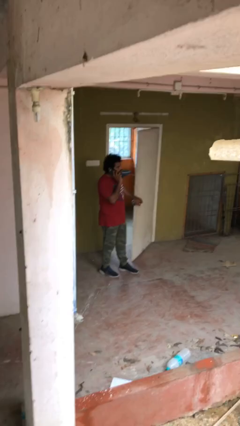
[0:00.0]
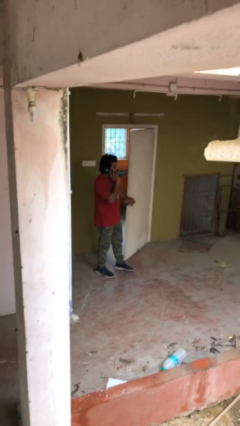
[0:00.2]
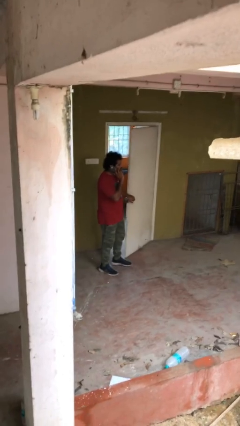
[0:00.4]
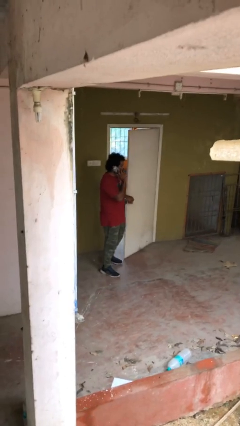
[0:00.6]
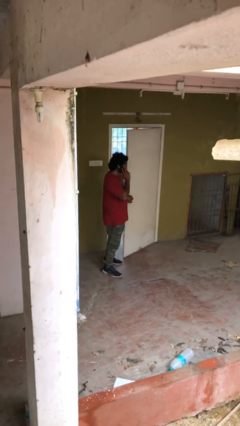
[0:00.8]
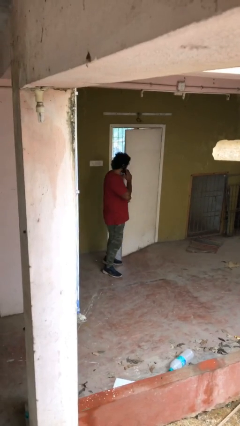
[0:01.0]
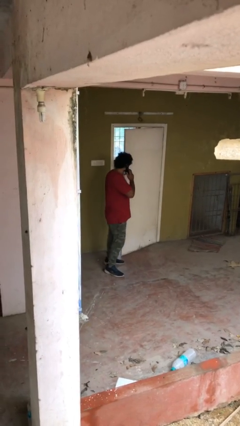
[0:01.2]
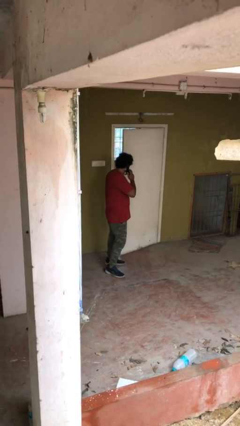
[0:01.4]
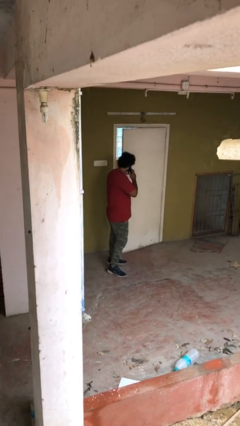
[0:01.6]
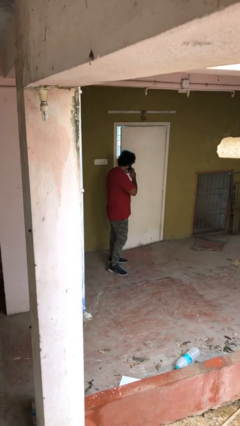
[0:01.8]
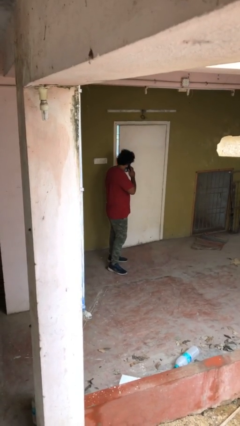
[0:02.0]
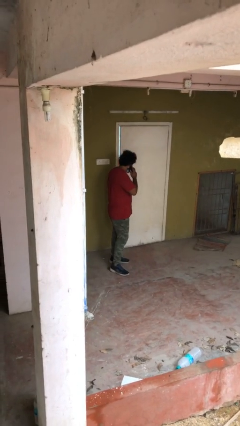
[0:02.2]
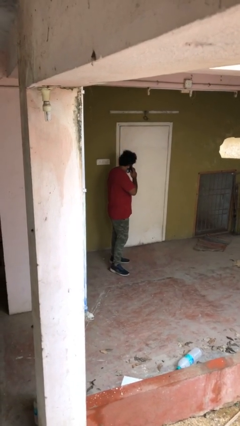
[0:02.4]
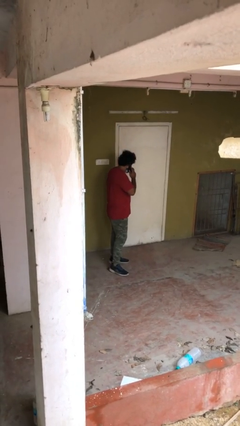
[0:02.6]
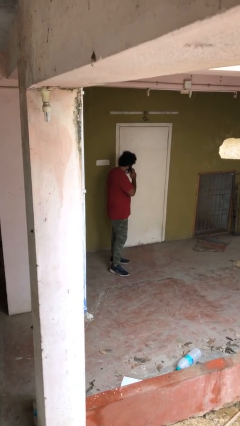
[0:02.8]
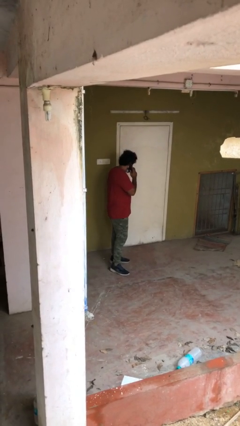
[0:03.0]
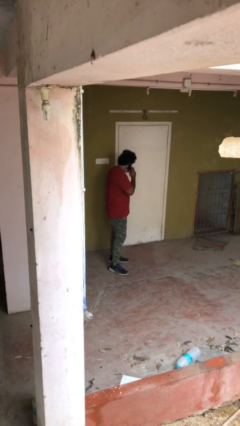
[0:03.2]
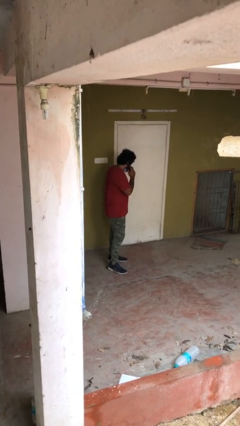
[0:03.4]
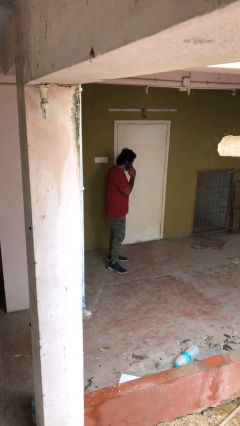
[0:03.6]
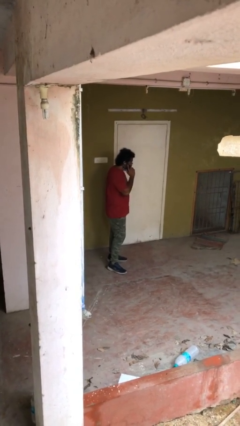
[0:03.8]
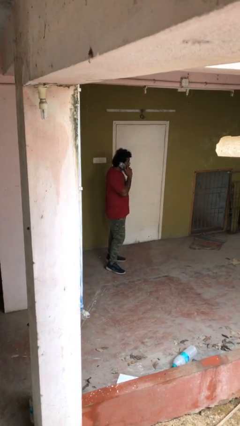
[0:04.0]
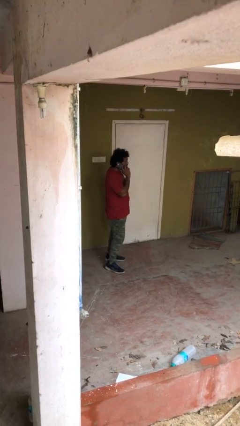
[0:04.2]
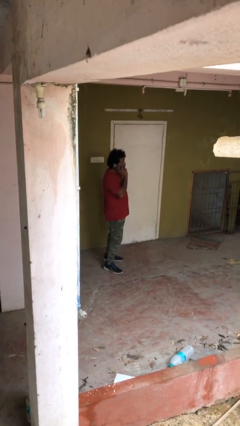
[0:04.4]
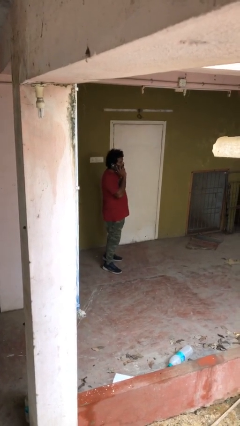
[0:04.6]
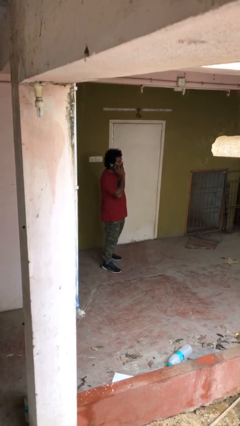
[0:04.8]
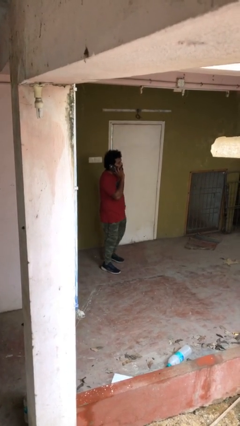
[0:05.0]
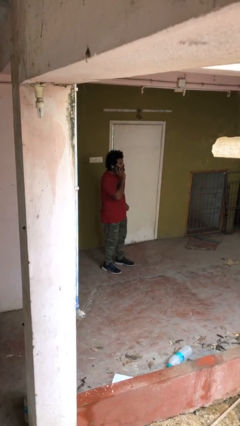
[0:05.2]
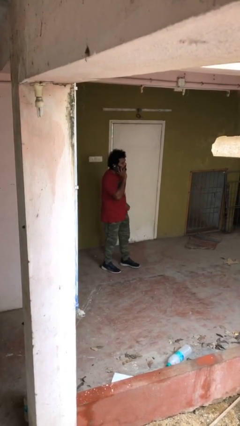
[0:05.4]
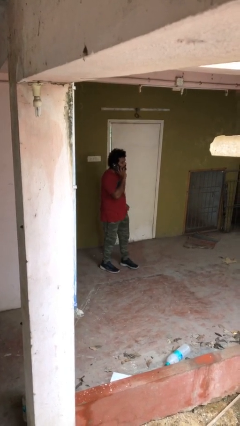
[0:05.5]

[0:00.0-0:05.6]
person closes facility door

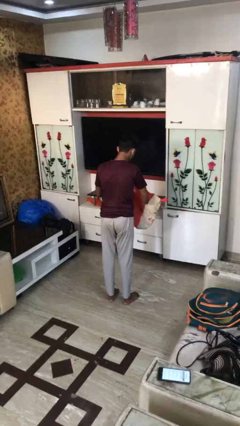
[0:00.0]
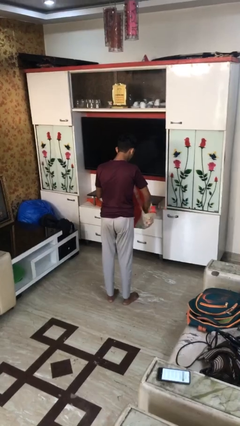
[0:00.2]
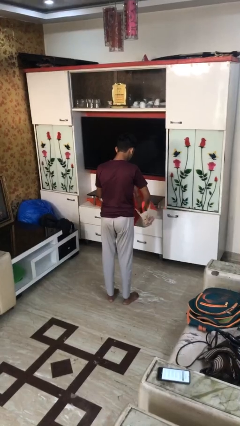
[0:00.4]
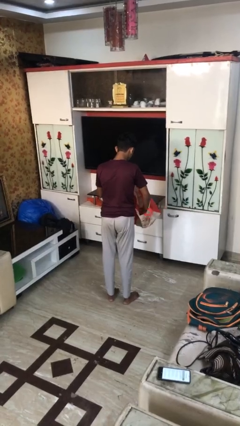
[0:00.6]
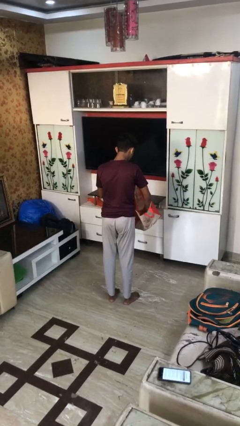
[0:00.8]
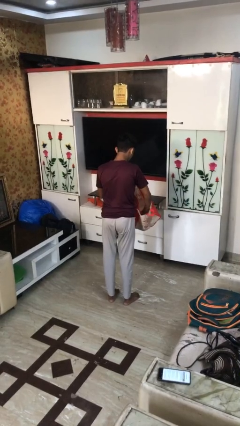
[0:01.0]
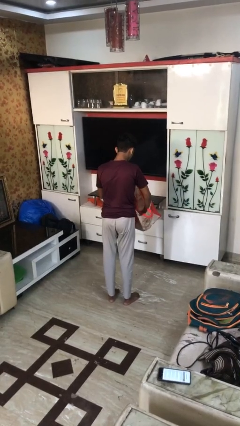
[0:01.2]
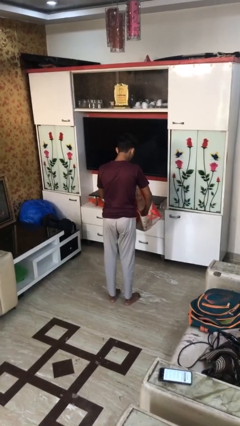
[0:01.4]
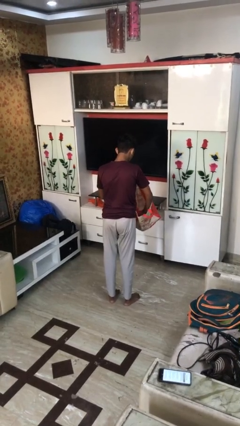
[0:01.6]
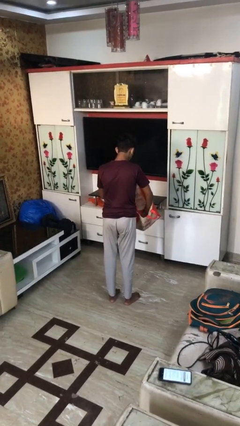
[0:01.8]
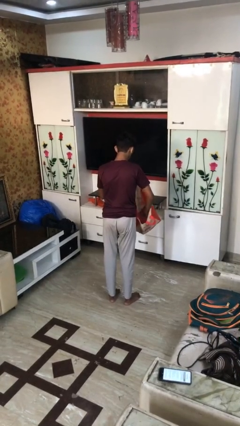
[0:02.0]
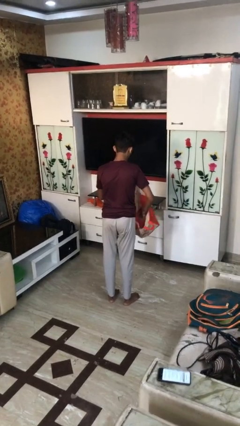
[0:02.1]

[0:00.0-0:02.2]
person searches in bag

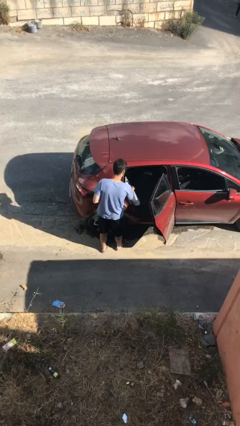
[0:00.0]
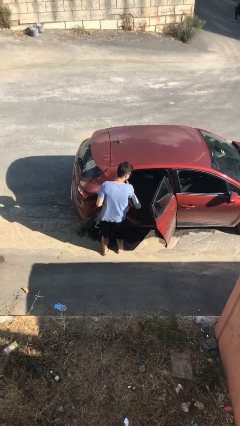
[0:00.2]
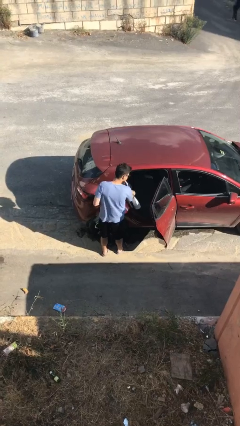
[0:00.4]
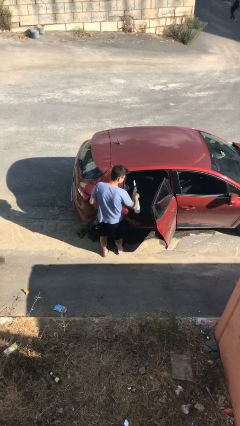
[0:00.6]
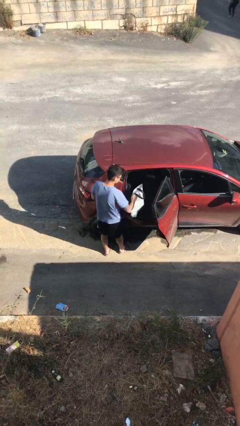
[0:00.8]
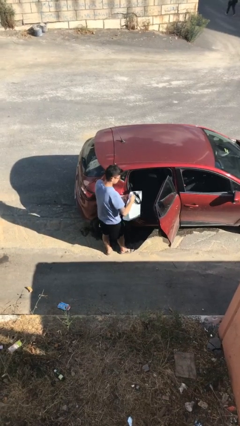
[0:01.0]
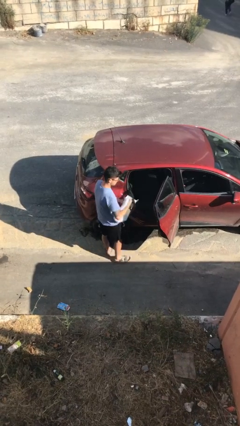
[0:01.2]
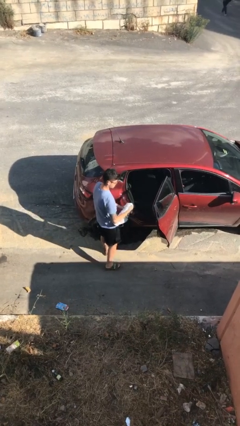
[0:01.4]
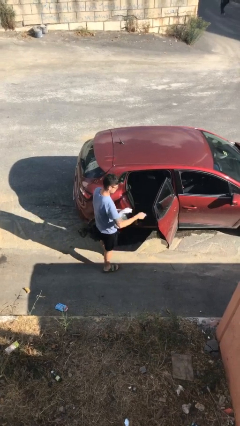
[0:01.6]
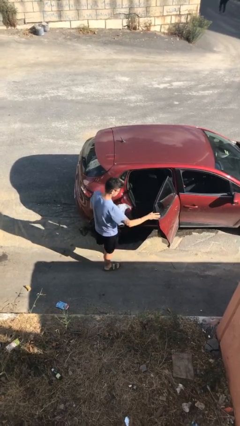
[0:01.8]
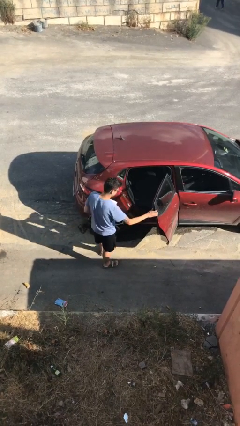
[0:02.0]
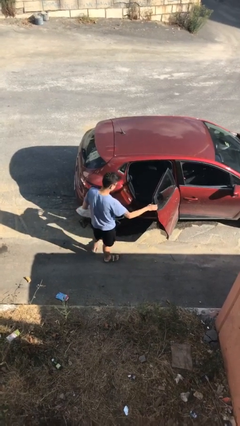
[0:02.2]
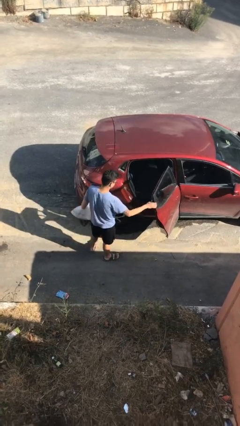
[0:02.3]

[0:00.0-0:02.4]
person unloads car

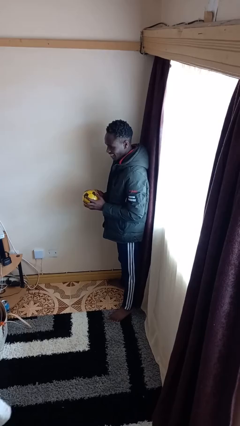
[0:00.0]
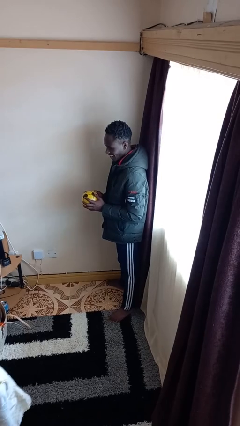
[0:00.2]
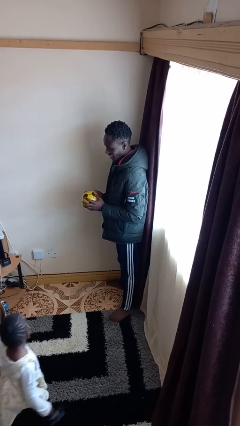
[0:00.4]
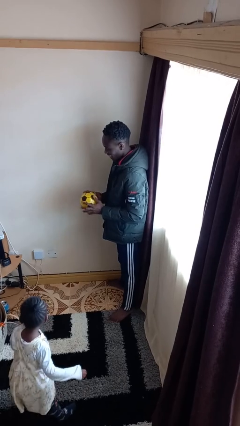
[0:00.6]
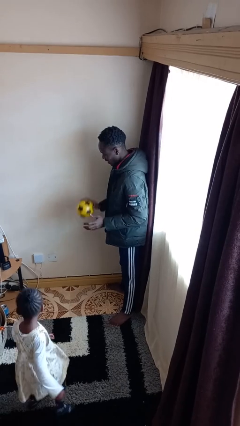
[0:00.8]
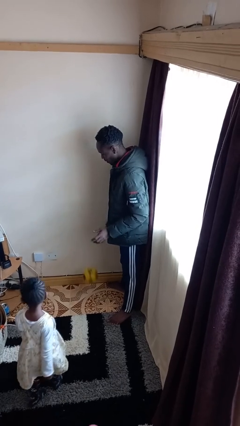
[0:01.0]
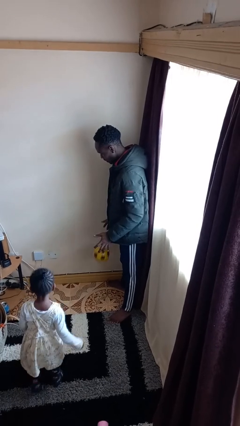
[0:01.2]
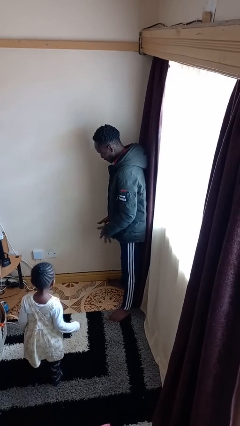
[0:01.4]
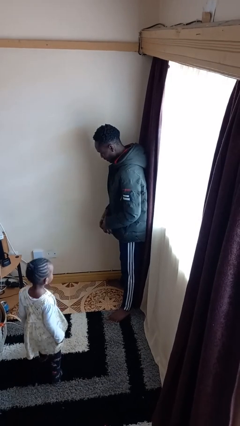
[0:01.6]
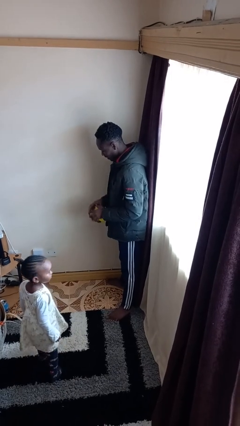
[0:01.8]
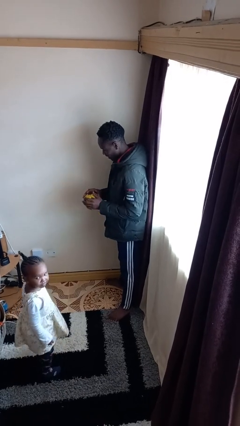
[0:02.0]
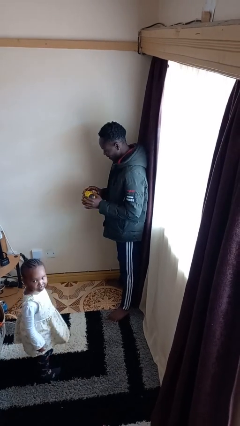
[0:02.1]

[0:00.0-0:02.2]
person bounces ball on floor

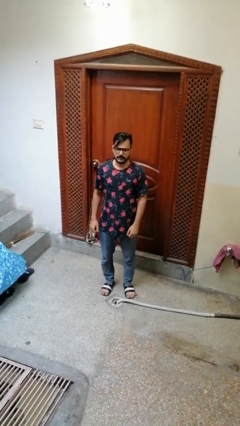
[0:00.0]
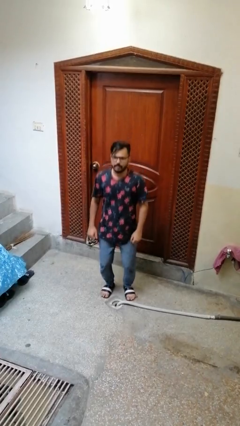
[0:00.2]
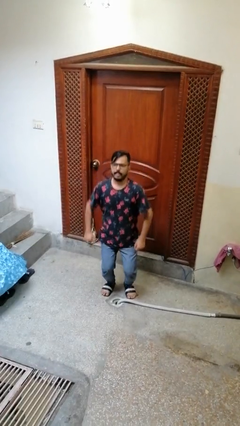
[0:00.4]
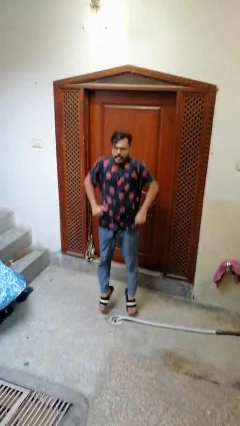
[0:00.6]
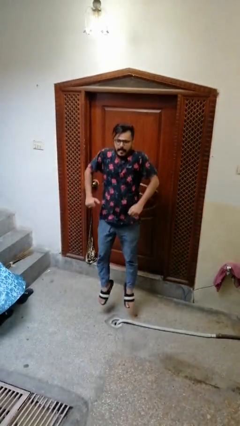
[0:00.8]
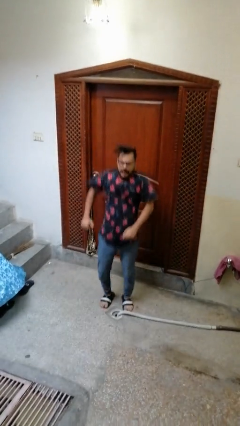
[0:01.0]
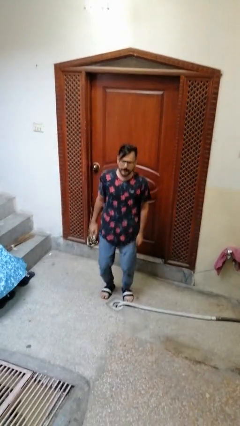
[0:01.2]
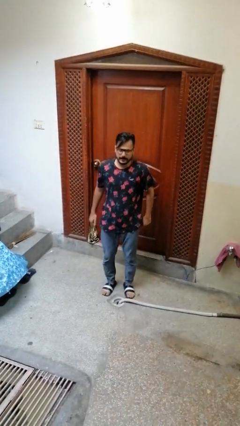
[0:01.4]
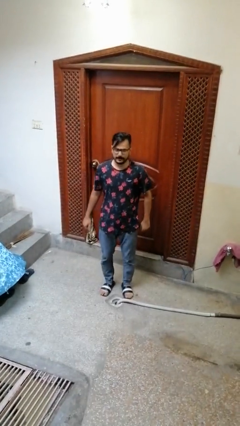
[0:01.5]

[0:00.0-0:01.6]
person jumps

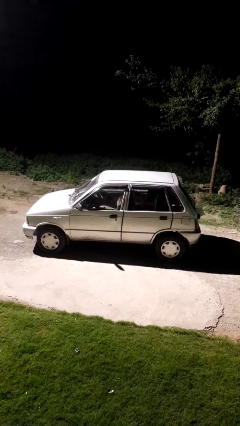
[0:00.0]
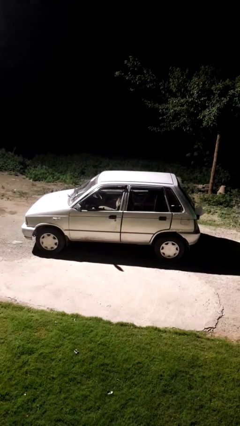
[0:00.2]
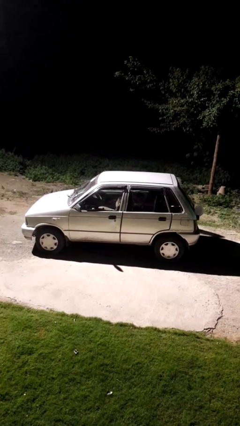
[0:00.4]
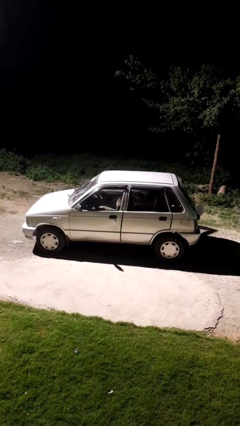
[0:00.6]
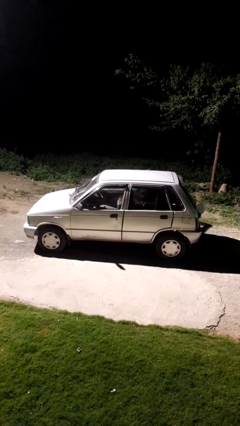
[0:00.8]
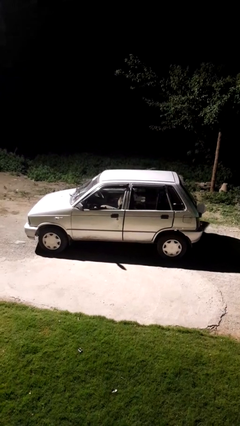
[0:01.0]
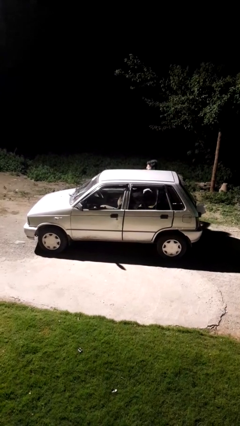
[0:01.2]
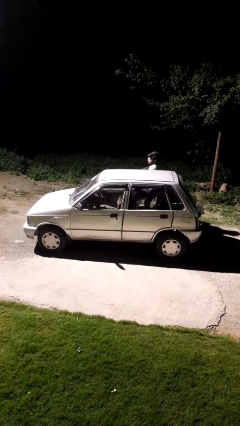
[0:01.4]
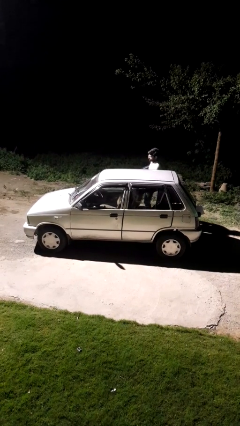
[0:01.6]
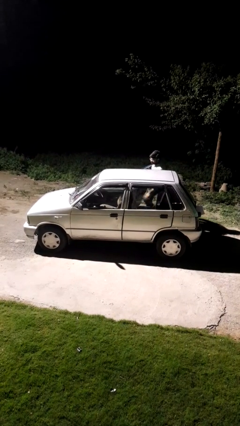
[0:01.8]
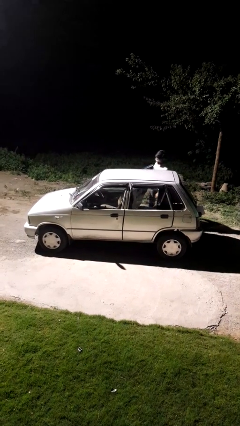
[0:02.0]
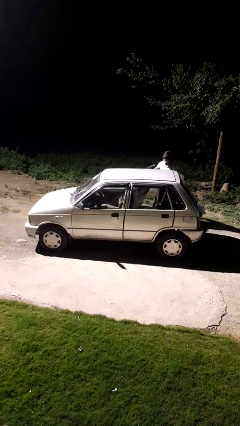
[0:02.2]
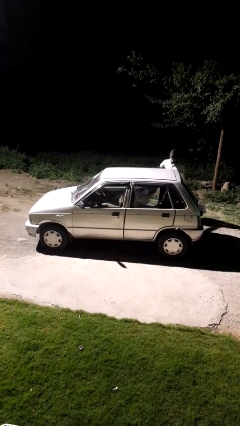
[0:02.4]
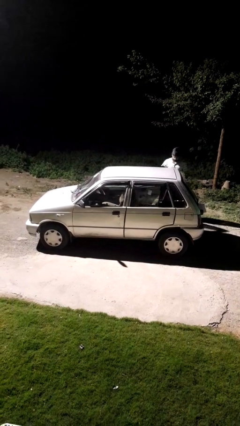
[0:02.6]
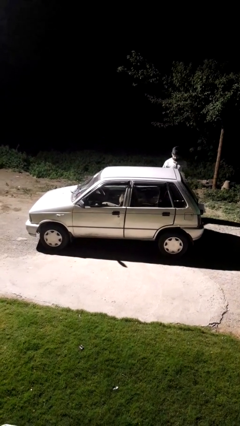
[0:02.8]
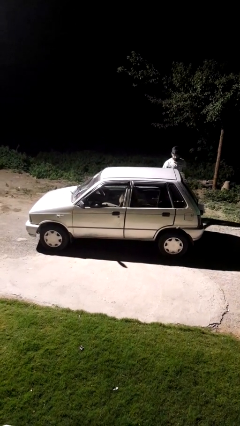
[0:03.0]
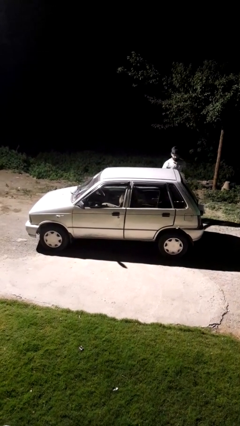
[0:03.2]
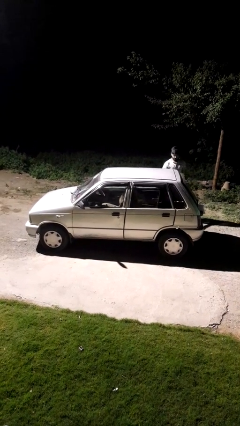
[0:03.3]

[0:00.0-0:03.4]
car drops off person
